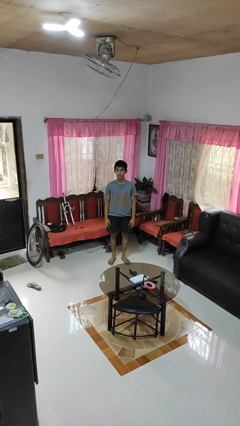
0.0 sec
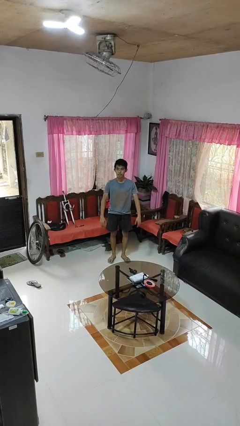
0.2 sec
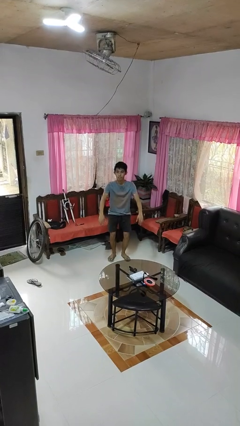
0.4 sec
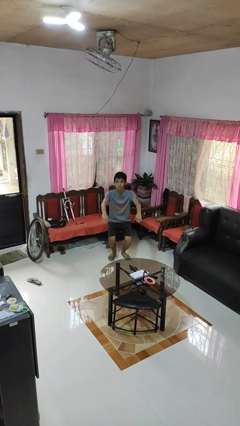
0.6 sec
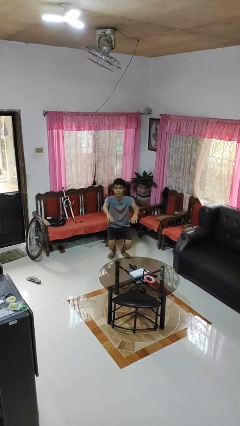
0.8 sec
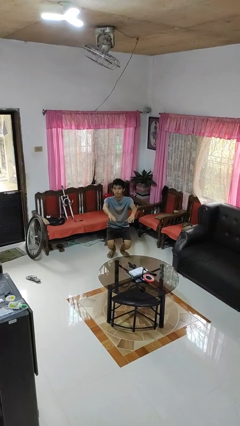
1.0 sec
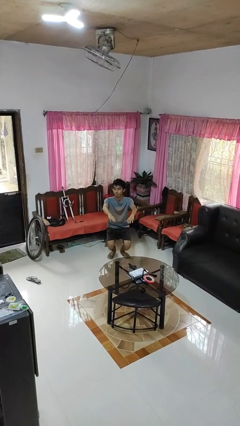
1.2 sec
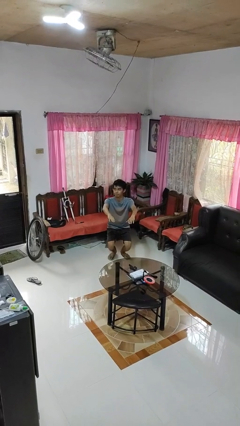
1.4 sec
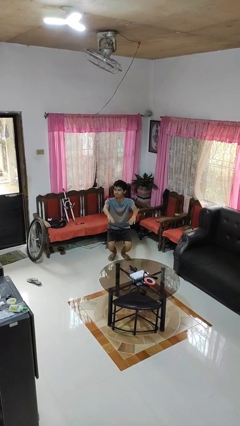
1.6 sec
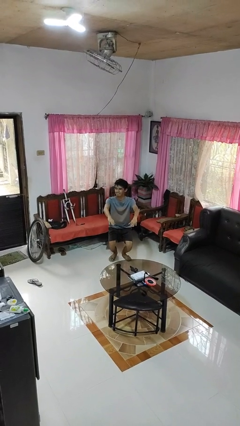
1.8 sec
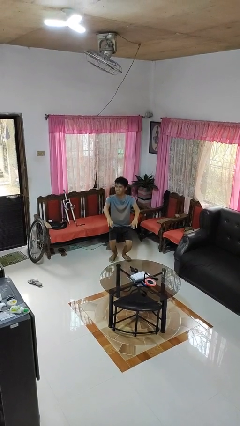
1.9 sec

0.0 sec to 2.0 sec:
person squats

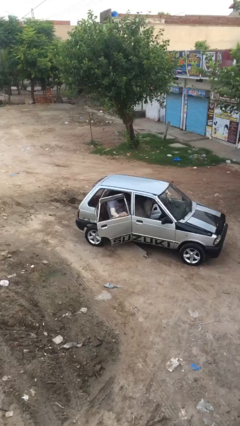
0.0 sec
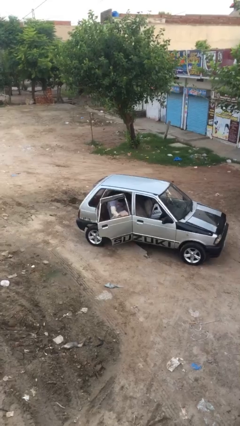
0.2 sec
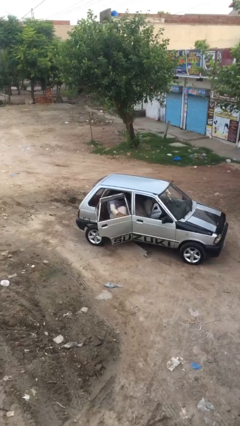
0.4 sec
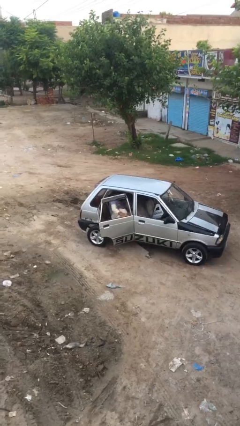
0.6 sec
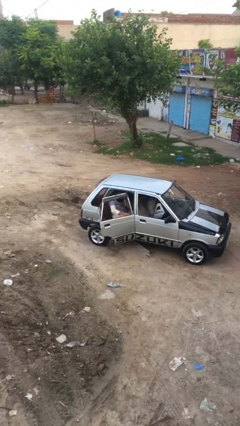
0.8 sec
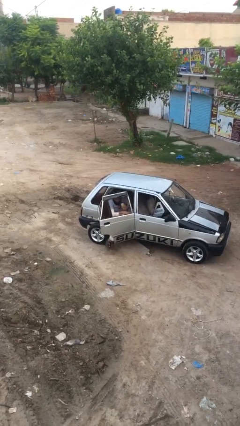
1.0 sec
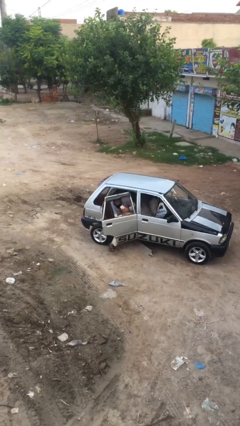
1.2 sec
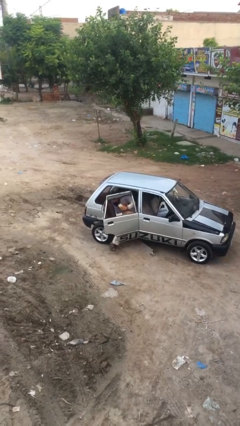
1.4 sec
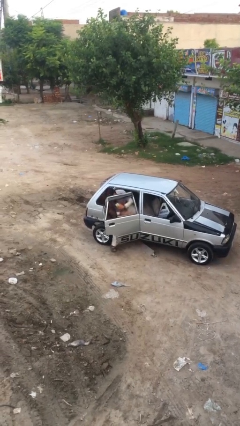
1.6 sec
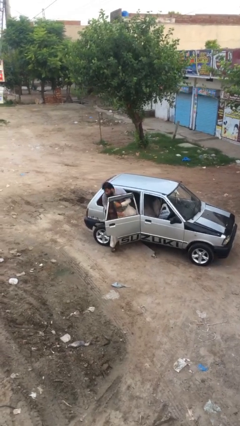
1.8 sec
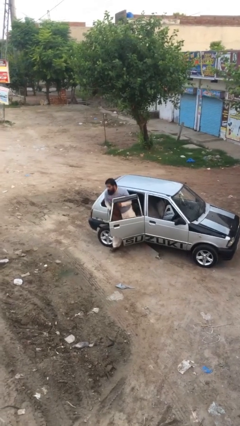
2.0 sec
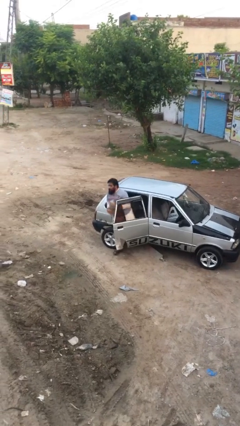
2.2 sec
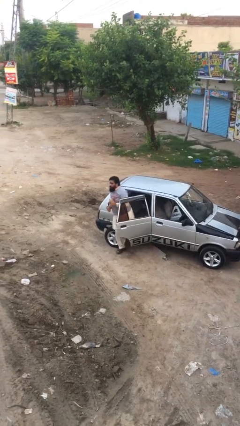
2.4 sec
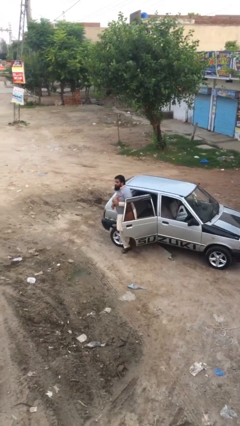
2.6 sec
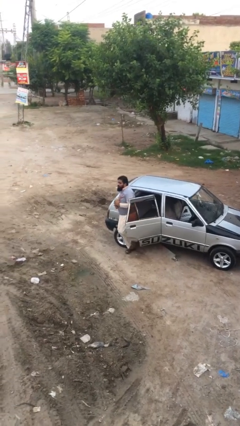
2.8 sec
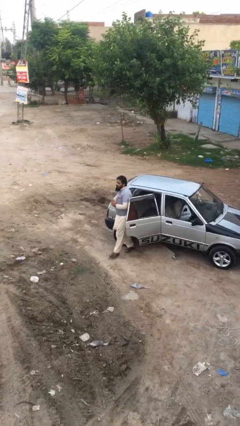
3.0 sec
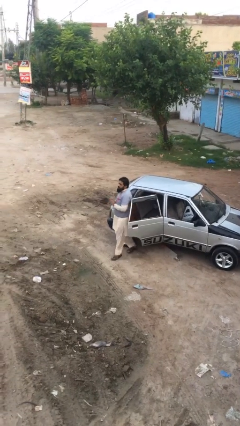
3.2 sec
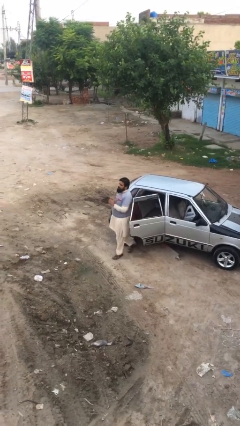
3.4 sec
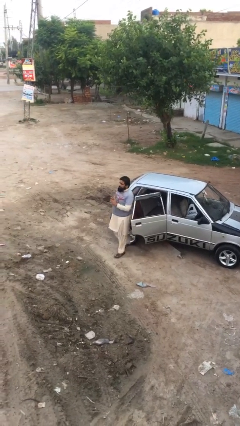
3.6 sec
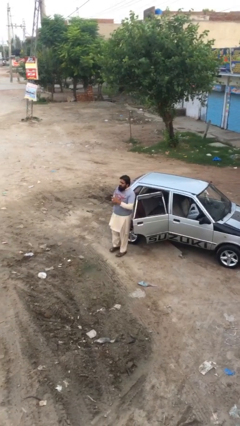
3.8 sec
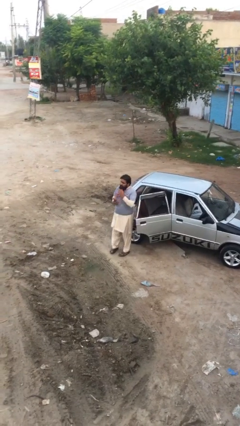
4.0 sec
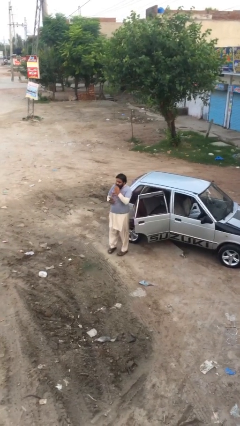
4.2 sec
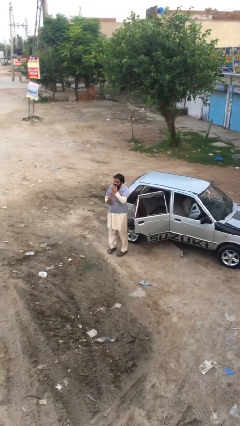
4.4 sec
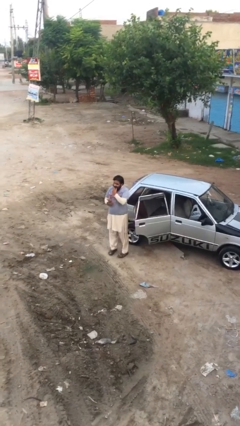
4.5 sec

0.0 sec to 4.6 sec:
person exits car

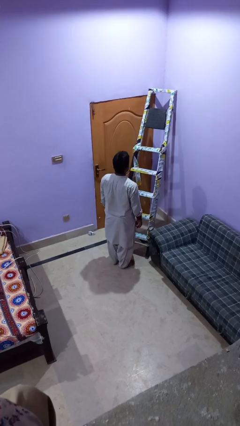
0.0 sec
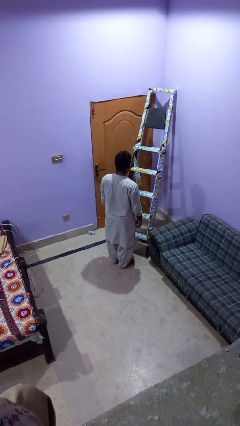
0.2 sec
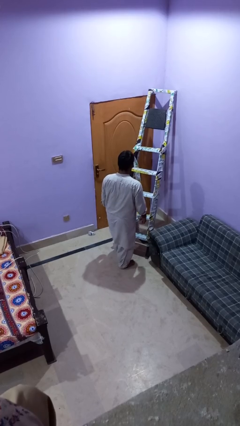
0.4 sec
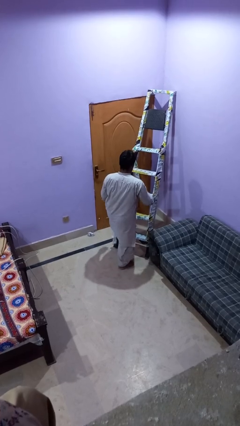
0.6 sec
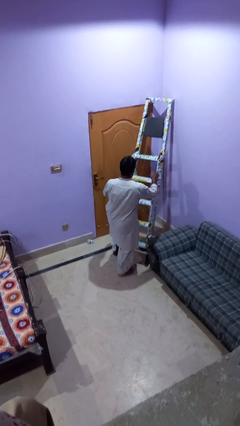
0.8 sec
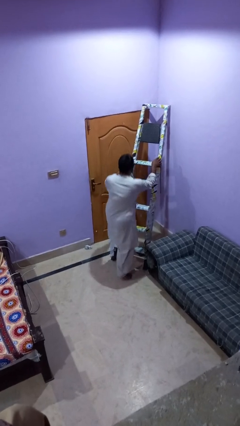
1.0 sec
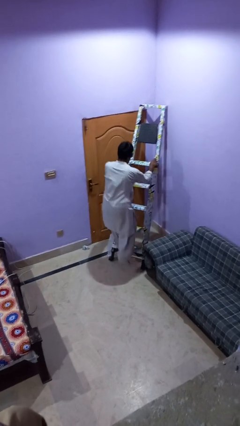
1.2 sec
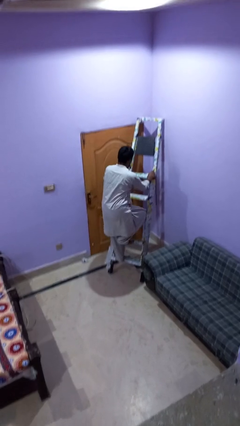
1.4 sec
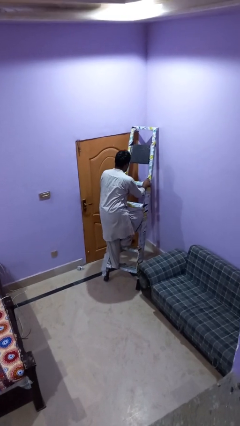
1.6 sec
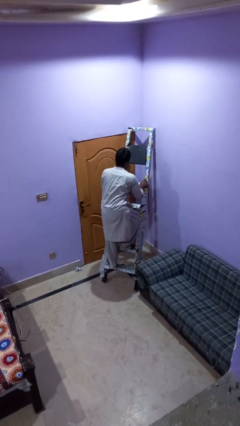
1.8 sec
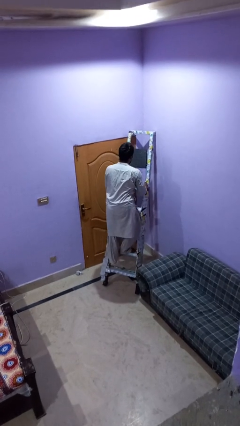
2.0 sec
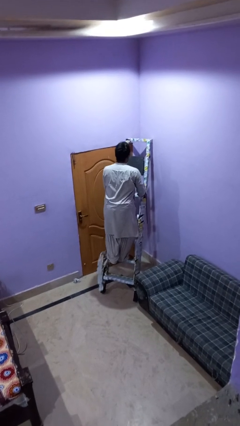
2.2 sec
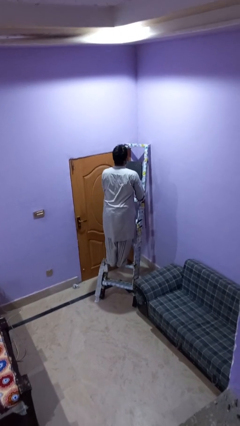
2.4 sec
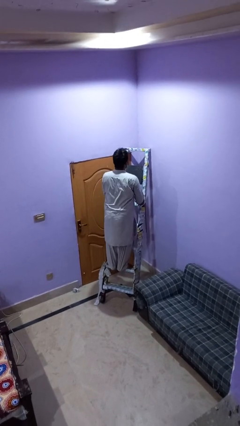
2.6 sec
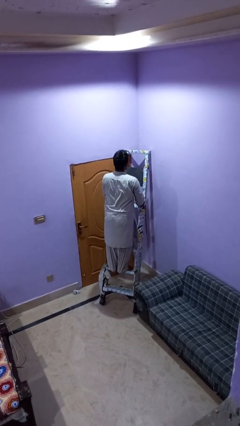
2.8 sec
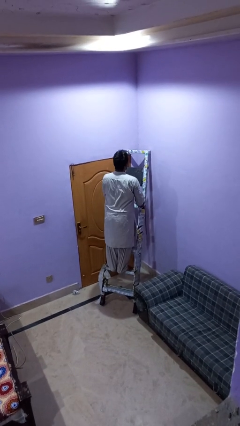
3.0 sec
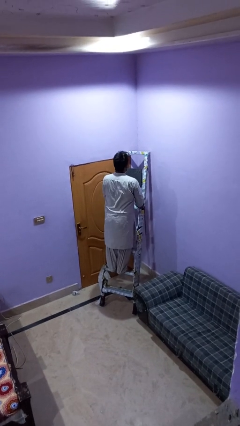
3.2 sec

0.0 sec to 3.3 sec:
person climbs on chair

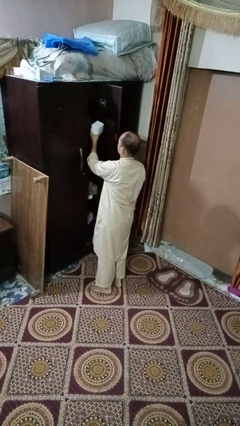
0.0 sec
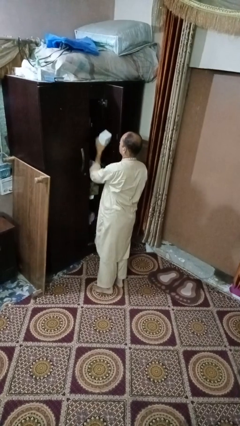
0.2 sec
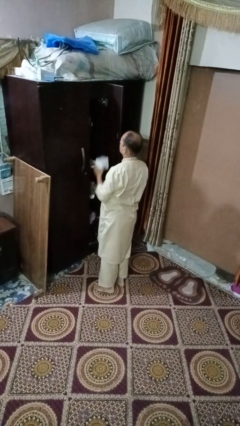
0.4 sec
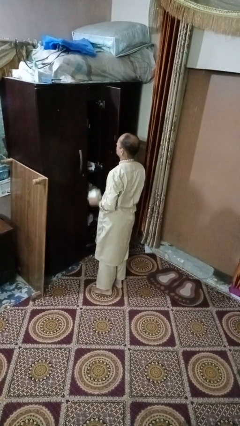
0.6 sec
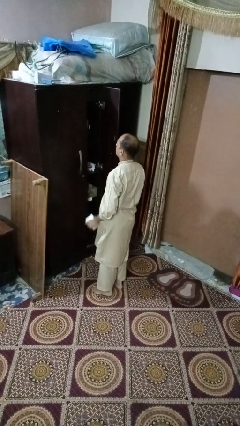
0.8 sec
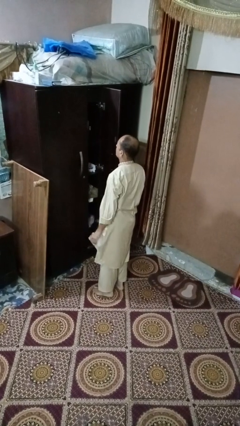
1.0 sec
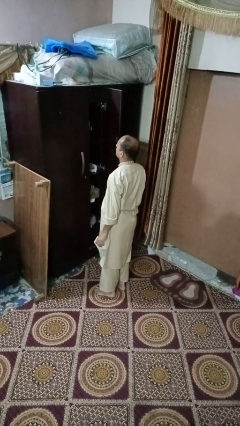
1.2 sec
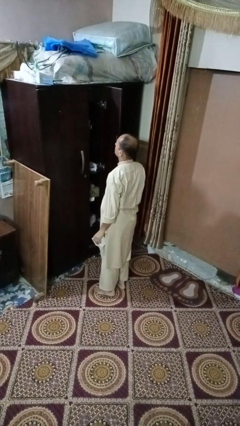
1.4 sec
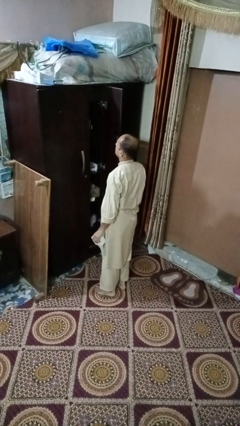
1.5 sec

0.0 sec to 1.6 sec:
person puts down object into cabinet

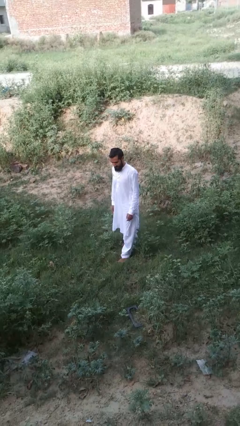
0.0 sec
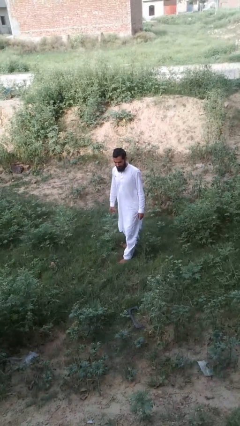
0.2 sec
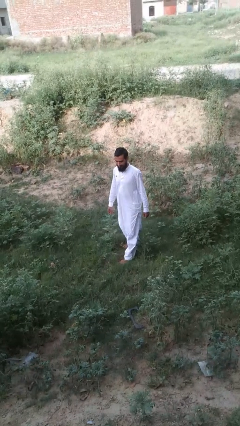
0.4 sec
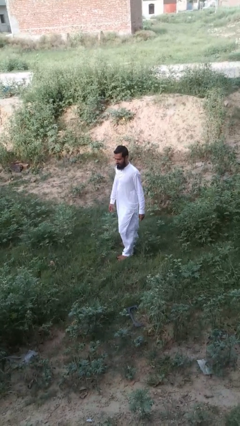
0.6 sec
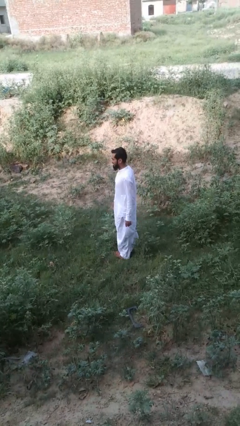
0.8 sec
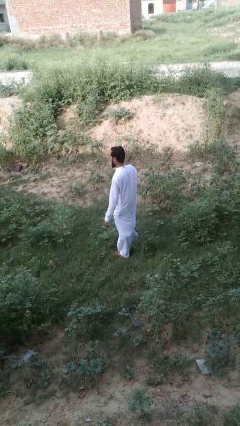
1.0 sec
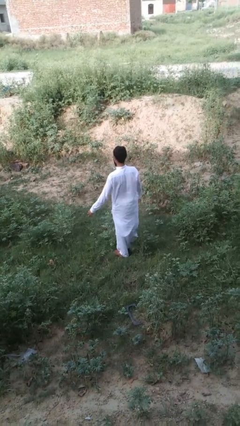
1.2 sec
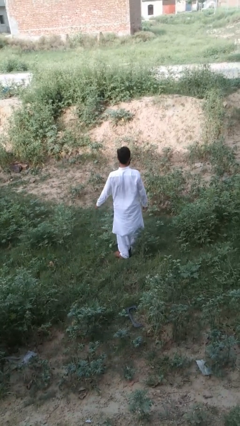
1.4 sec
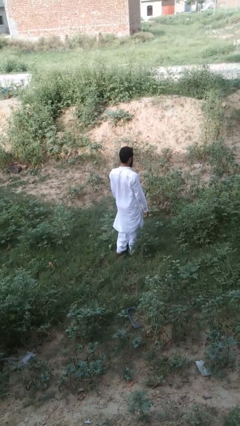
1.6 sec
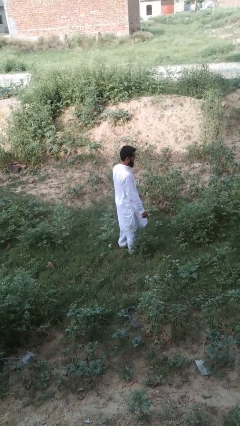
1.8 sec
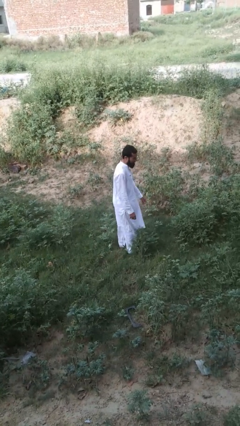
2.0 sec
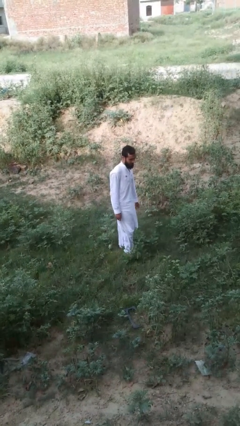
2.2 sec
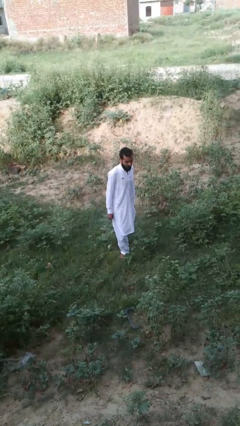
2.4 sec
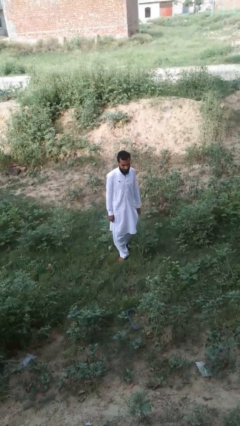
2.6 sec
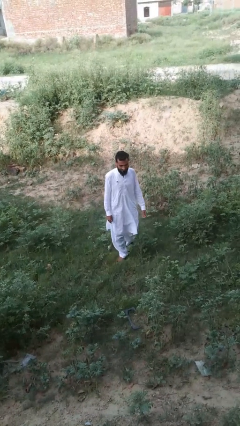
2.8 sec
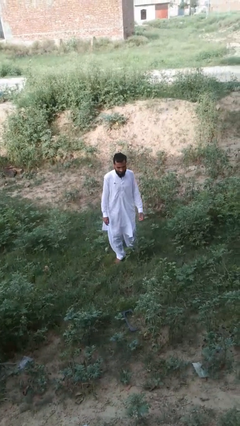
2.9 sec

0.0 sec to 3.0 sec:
person twirls

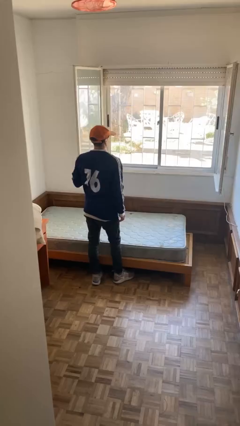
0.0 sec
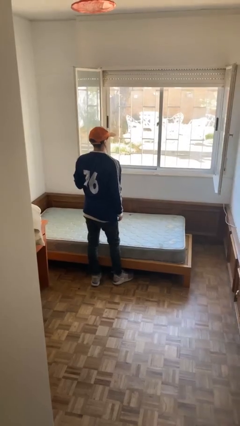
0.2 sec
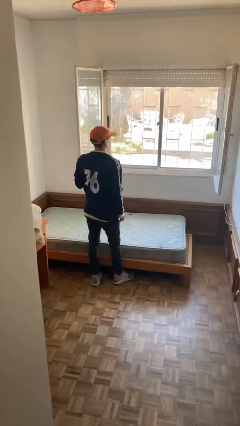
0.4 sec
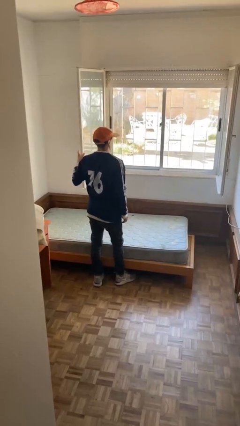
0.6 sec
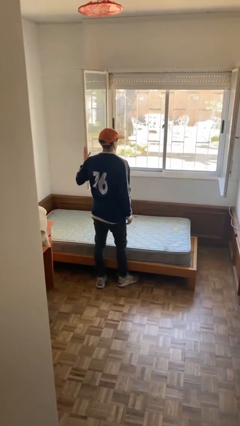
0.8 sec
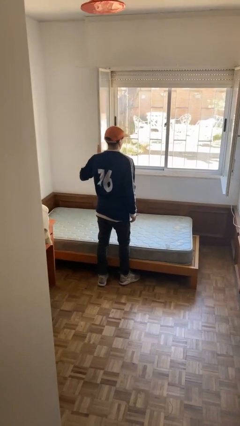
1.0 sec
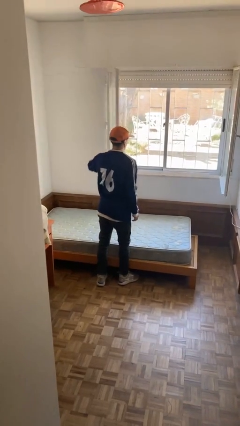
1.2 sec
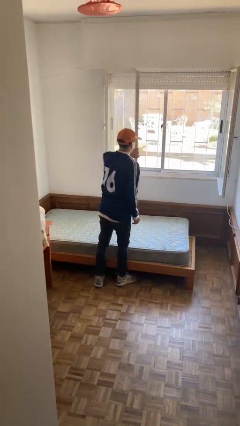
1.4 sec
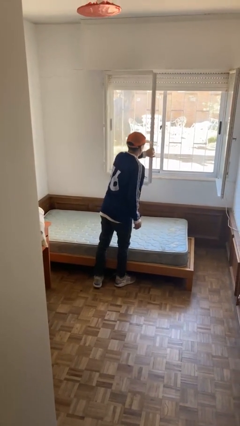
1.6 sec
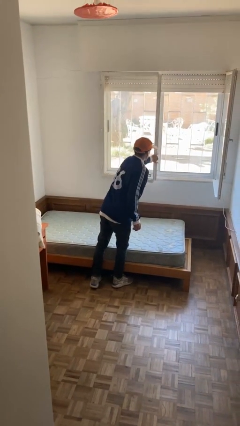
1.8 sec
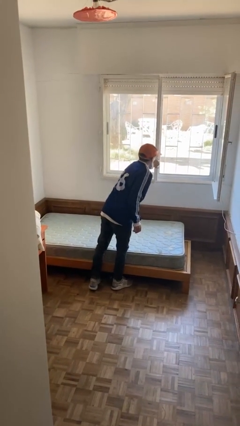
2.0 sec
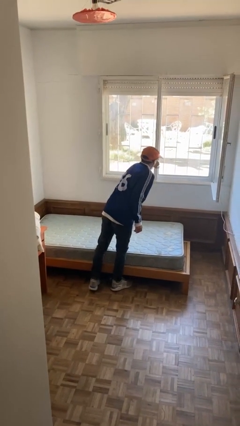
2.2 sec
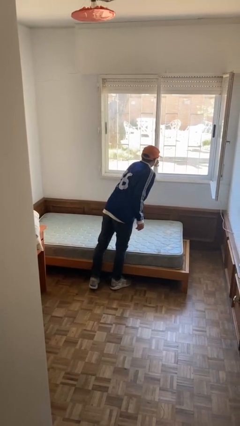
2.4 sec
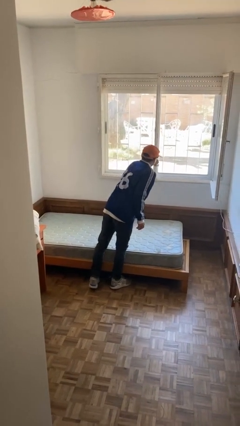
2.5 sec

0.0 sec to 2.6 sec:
person closes home window
